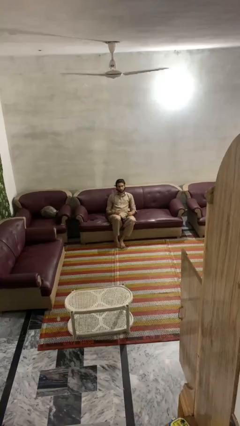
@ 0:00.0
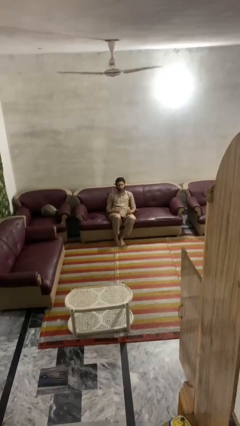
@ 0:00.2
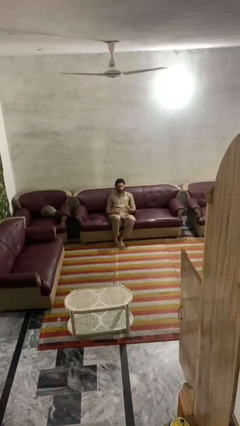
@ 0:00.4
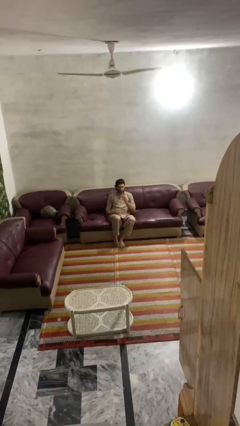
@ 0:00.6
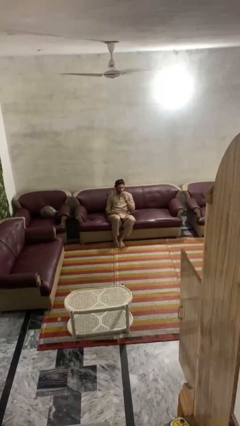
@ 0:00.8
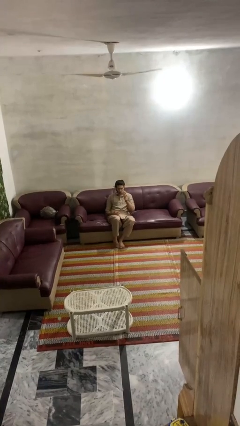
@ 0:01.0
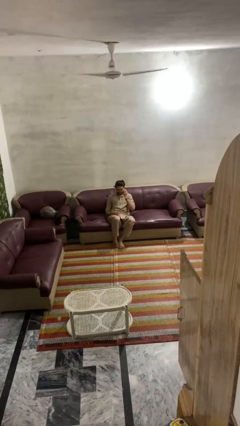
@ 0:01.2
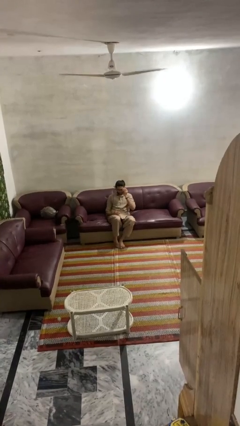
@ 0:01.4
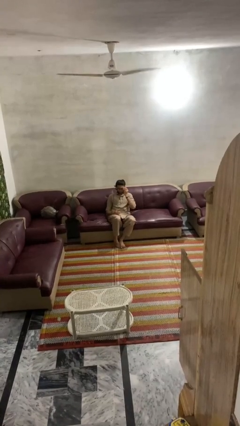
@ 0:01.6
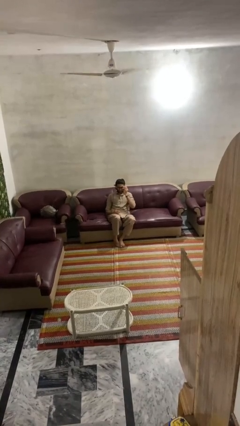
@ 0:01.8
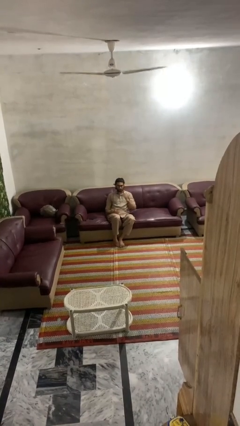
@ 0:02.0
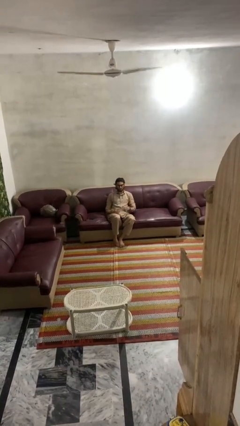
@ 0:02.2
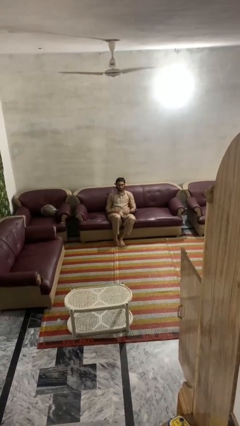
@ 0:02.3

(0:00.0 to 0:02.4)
person puts on glasses

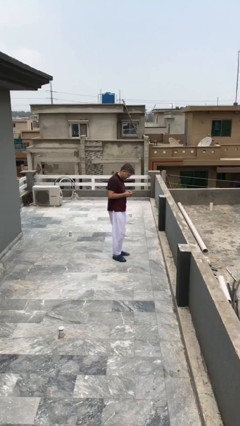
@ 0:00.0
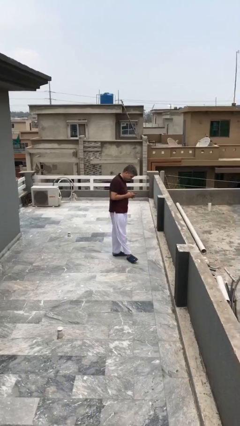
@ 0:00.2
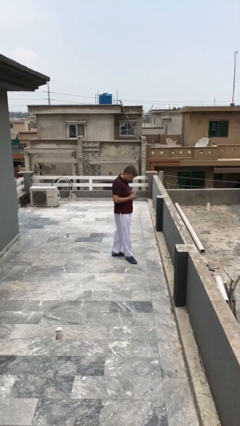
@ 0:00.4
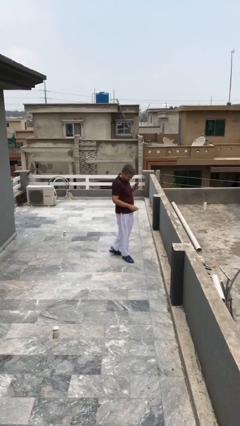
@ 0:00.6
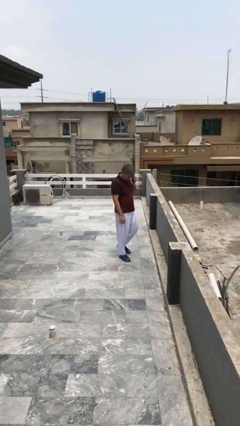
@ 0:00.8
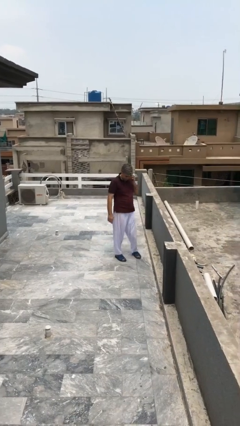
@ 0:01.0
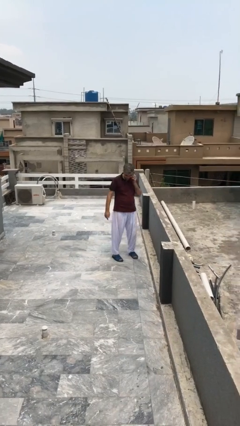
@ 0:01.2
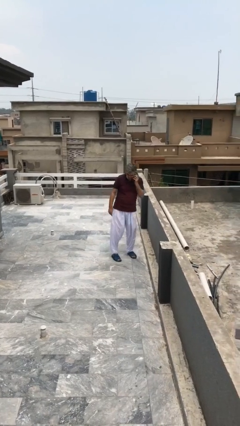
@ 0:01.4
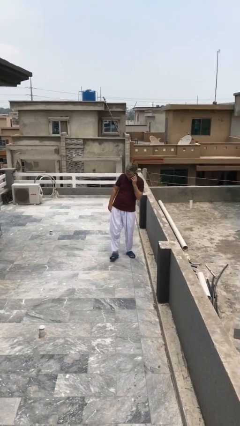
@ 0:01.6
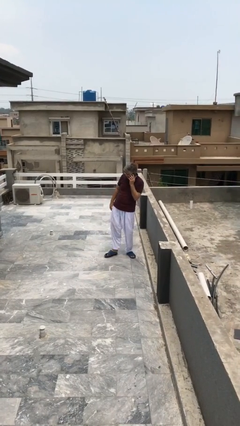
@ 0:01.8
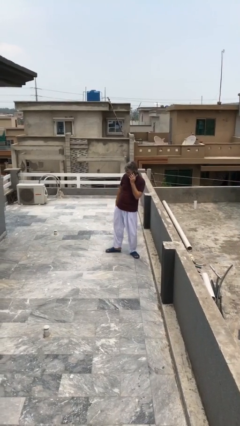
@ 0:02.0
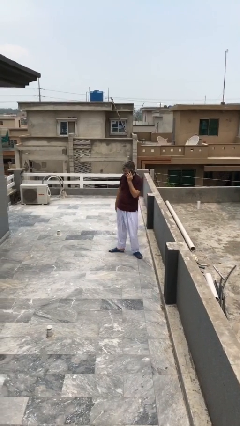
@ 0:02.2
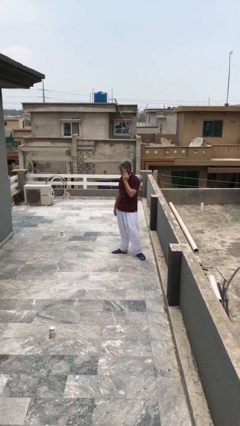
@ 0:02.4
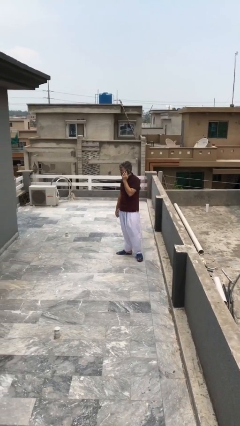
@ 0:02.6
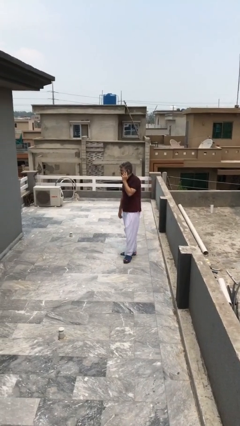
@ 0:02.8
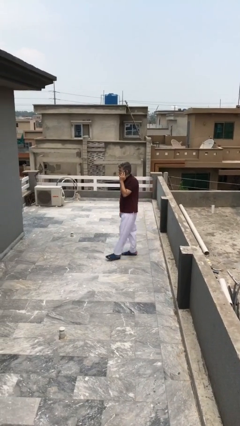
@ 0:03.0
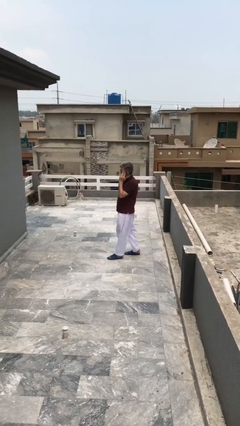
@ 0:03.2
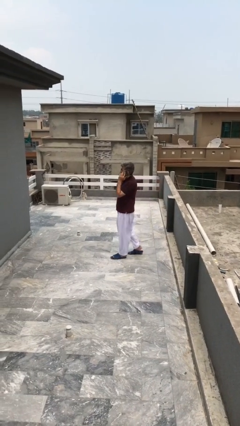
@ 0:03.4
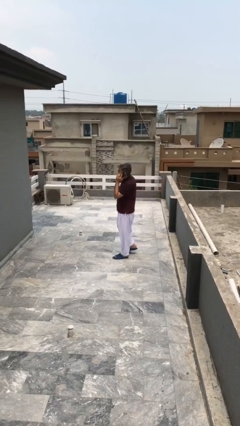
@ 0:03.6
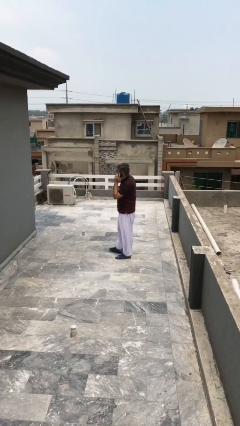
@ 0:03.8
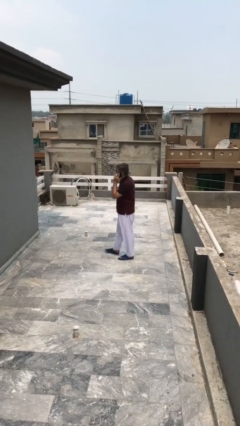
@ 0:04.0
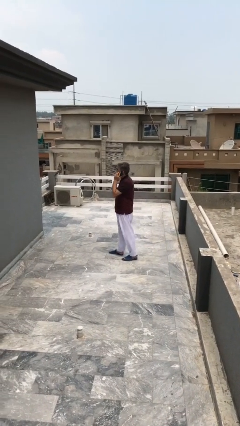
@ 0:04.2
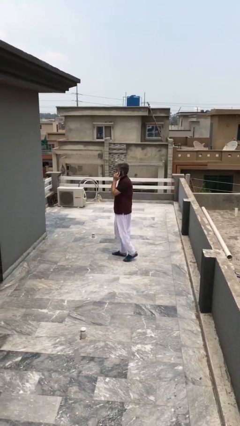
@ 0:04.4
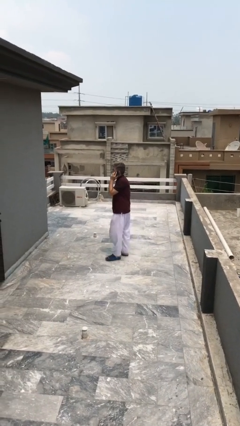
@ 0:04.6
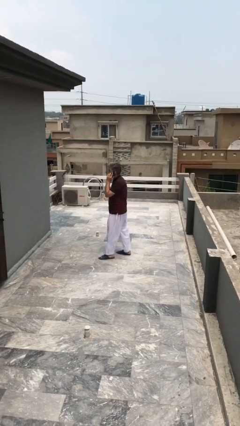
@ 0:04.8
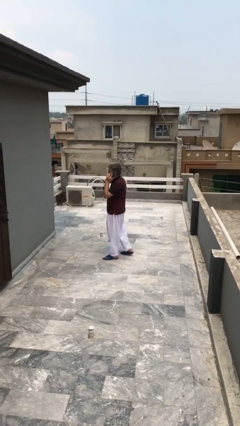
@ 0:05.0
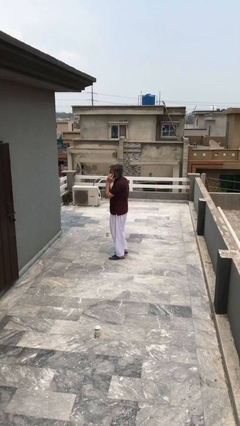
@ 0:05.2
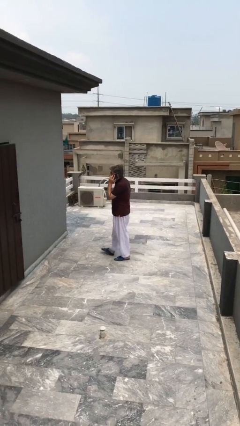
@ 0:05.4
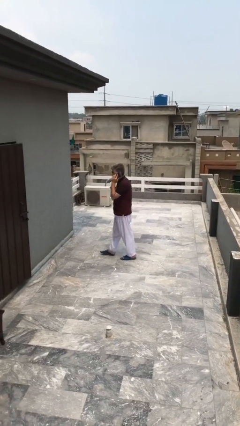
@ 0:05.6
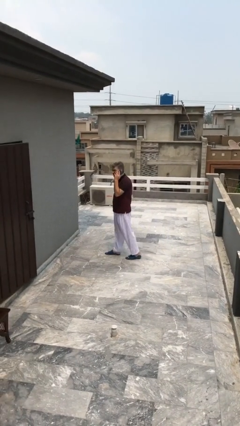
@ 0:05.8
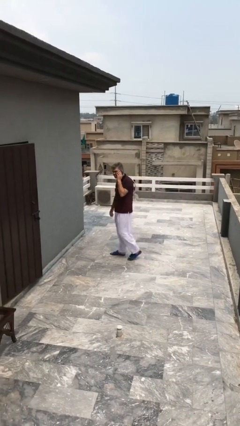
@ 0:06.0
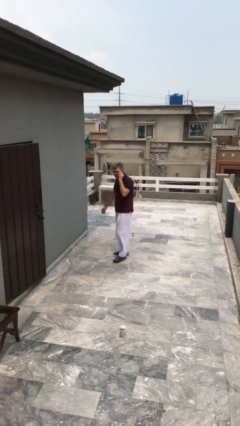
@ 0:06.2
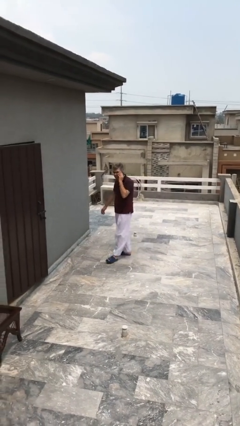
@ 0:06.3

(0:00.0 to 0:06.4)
person talks on phone

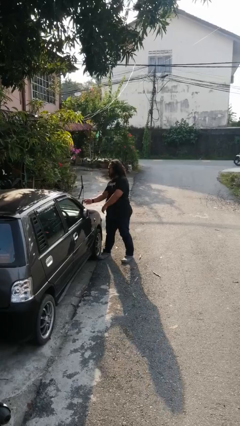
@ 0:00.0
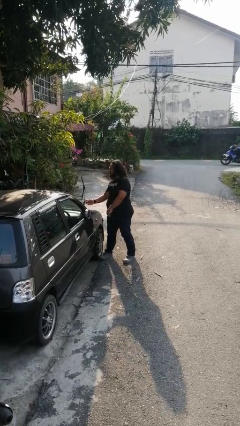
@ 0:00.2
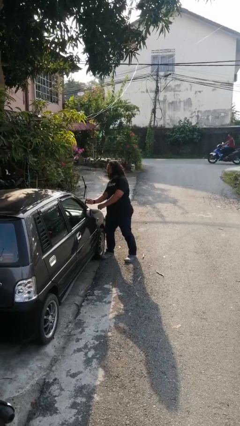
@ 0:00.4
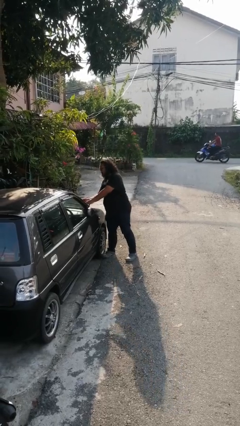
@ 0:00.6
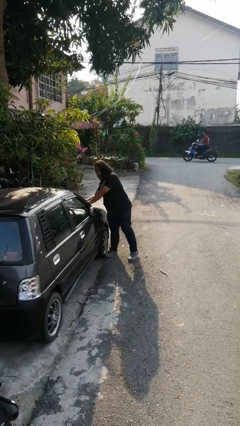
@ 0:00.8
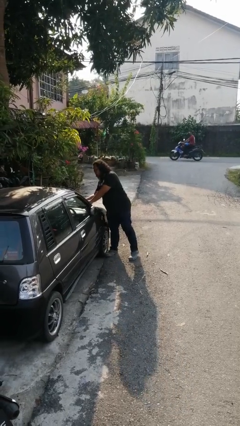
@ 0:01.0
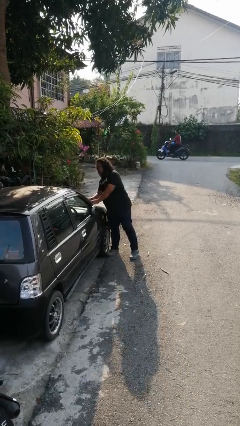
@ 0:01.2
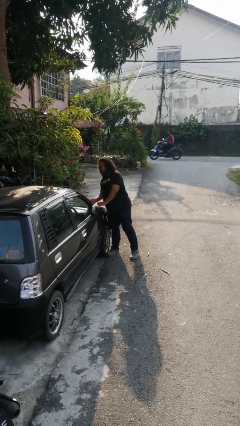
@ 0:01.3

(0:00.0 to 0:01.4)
person flips down car wipers

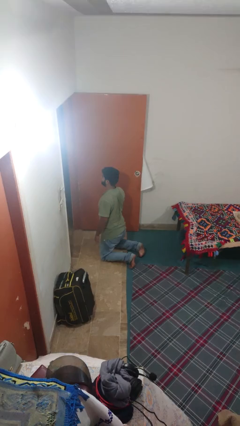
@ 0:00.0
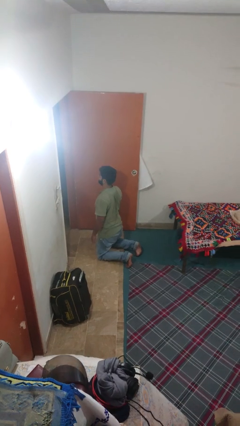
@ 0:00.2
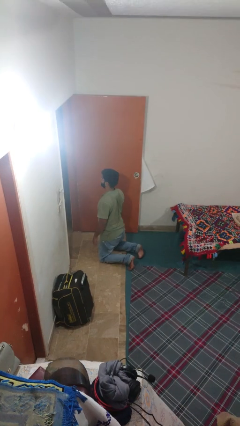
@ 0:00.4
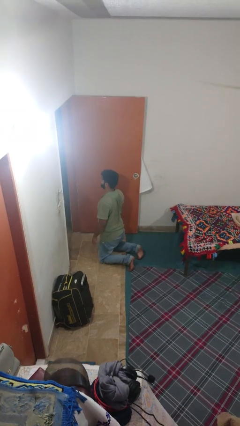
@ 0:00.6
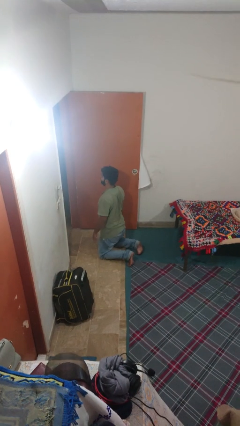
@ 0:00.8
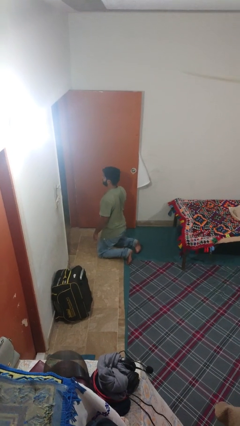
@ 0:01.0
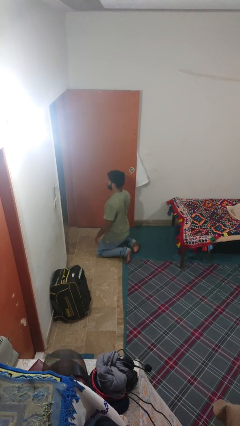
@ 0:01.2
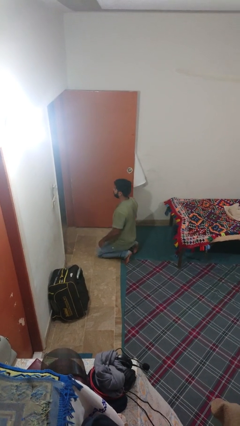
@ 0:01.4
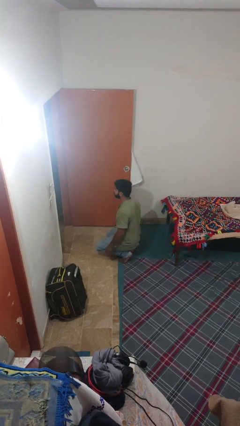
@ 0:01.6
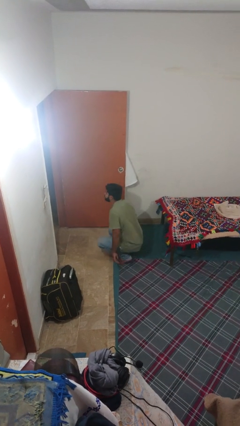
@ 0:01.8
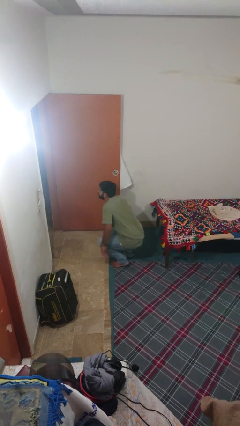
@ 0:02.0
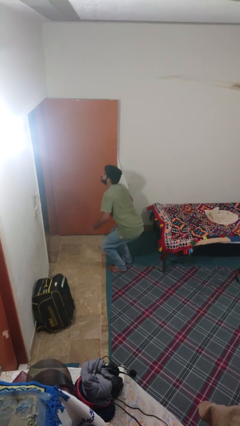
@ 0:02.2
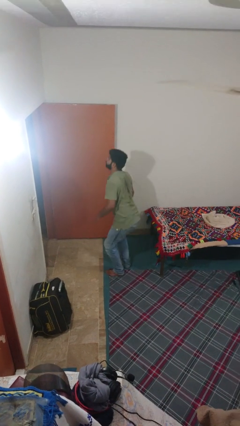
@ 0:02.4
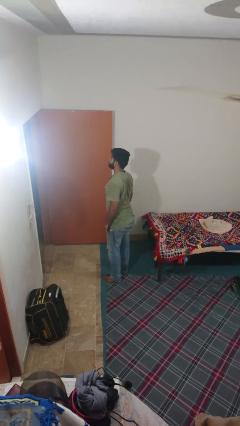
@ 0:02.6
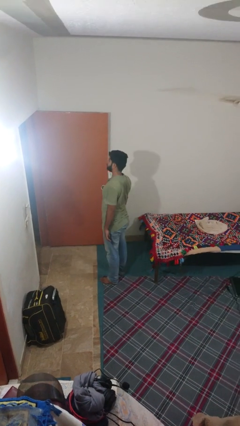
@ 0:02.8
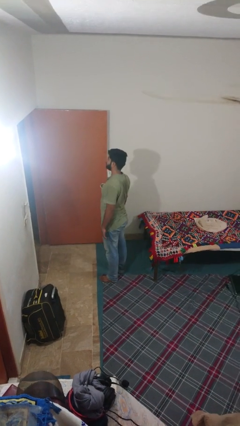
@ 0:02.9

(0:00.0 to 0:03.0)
person stands up from floor

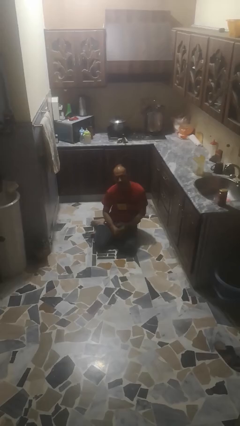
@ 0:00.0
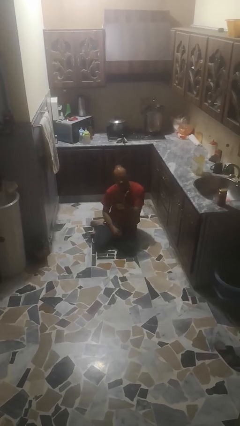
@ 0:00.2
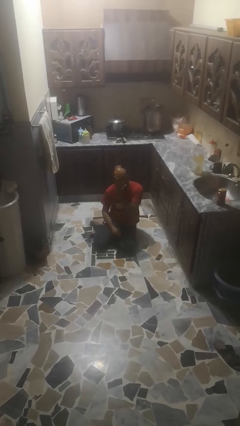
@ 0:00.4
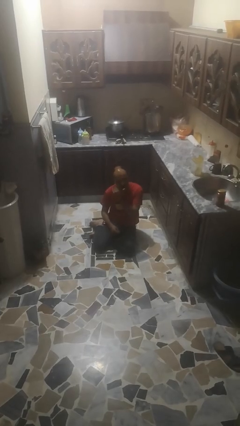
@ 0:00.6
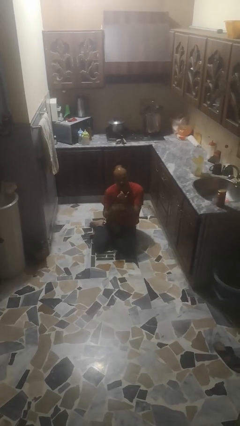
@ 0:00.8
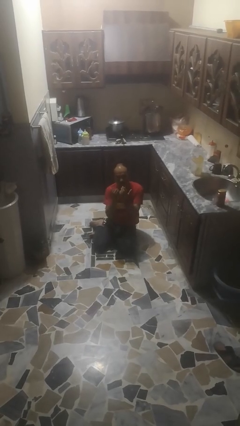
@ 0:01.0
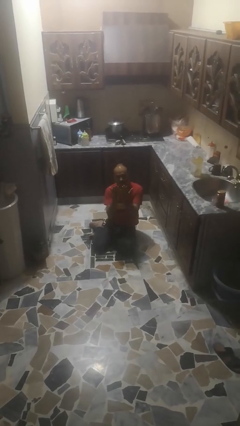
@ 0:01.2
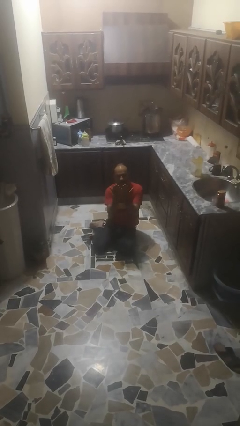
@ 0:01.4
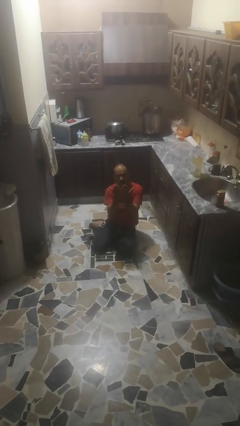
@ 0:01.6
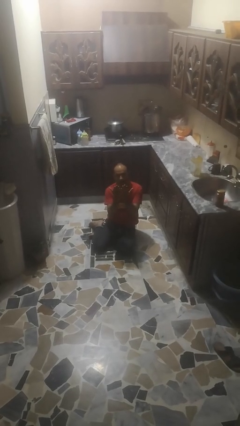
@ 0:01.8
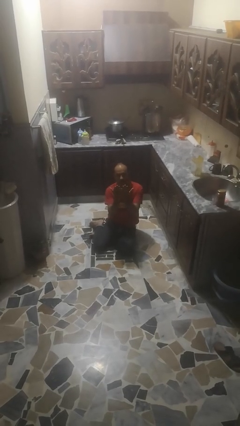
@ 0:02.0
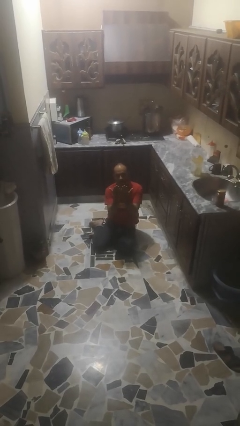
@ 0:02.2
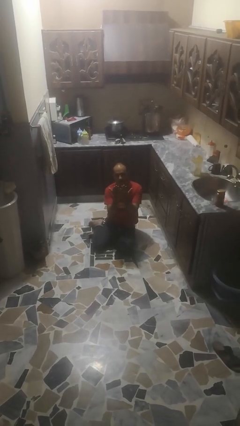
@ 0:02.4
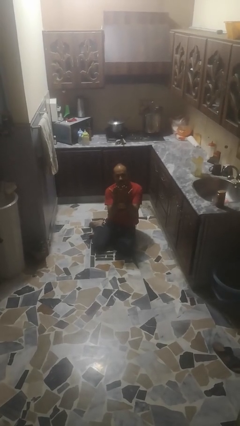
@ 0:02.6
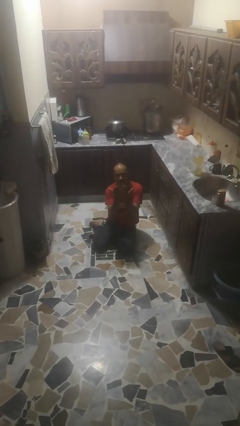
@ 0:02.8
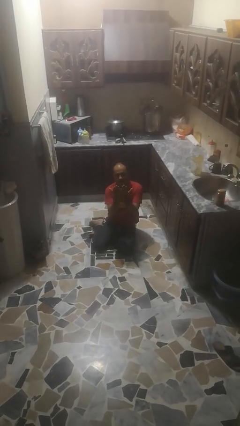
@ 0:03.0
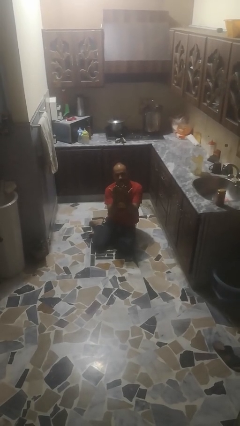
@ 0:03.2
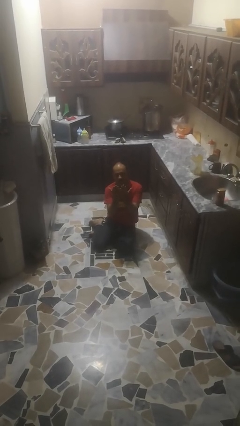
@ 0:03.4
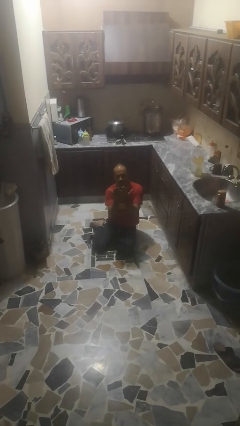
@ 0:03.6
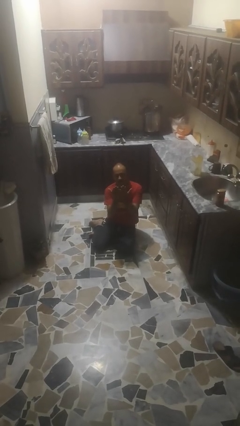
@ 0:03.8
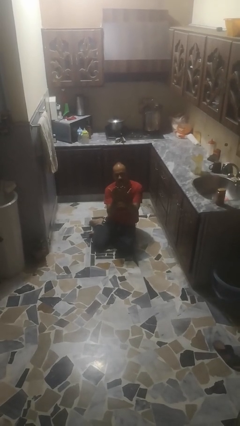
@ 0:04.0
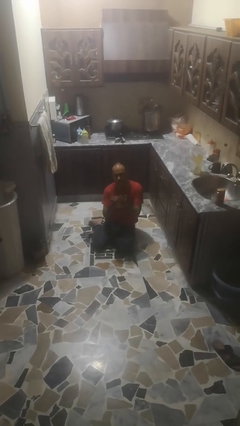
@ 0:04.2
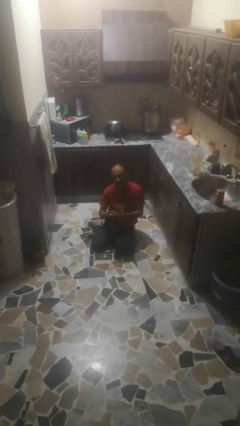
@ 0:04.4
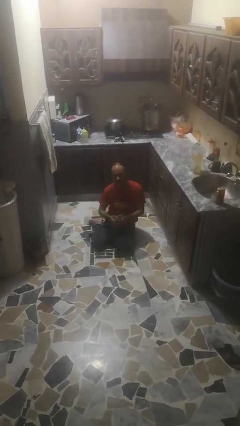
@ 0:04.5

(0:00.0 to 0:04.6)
person prays
